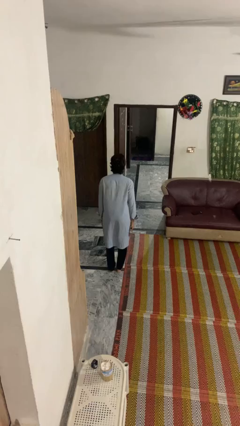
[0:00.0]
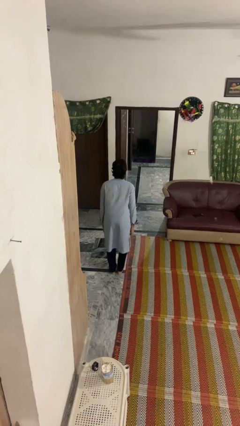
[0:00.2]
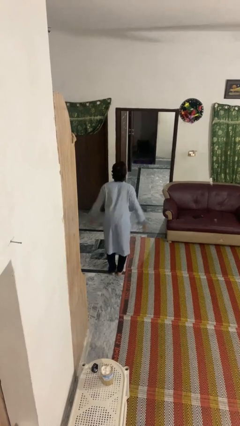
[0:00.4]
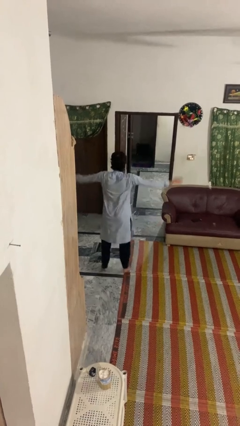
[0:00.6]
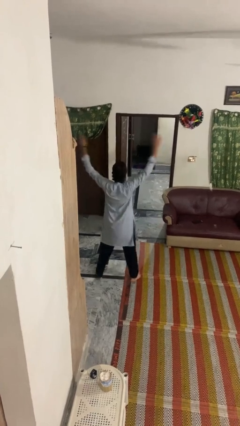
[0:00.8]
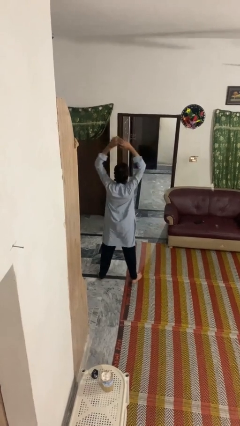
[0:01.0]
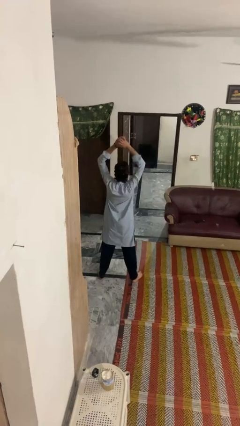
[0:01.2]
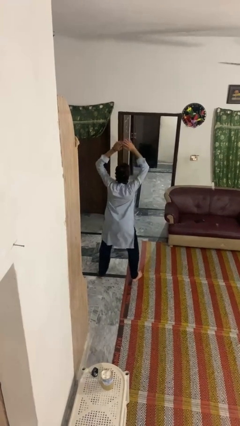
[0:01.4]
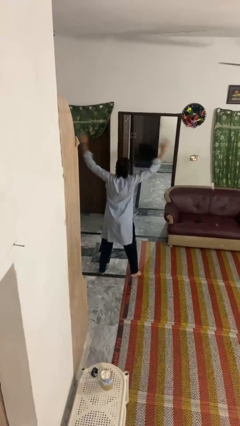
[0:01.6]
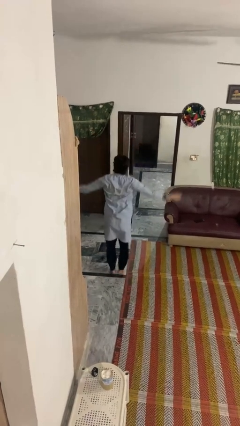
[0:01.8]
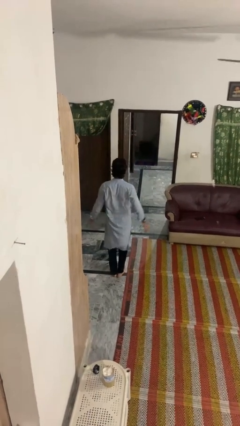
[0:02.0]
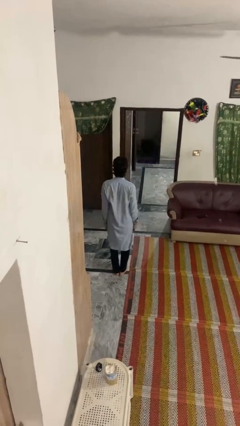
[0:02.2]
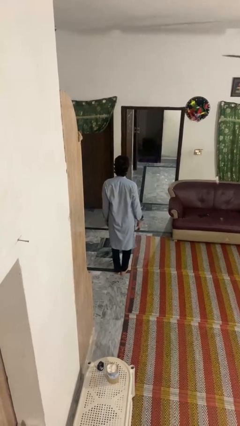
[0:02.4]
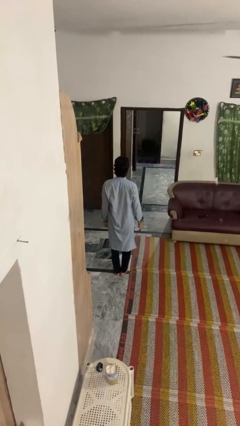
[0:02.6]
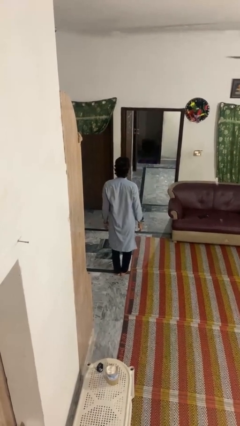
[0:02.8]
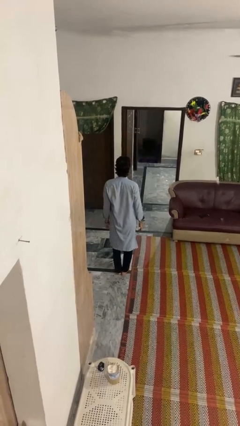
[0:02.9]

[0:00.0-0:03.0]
person exercises with jumping jacks

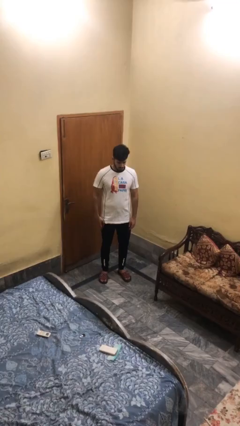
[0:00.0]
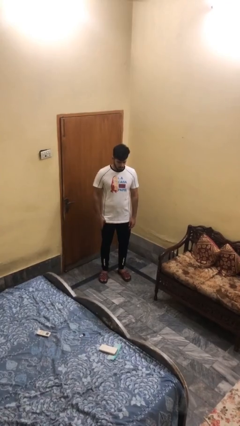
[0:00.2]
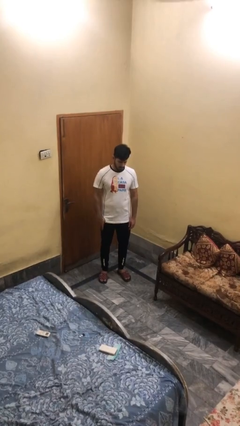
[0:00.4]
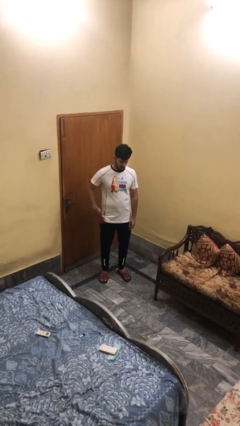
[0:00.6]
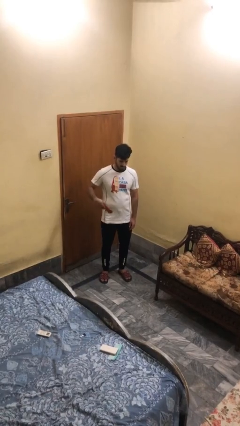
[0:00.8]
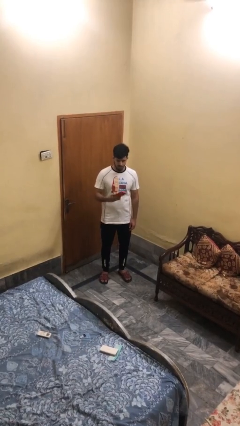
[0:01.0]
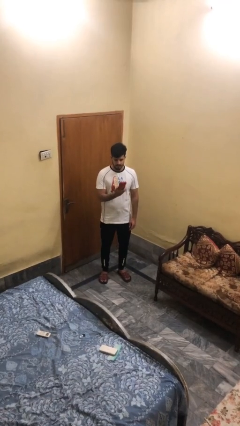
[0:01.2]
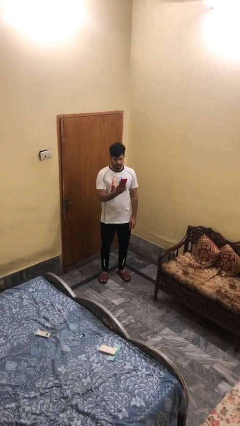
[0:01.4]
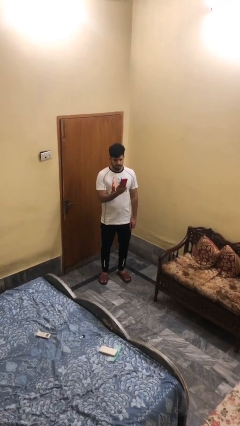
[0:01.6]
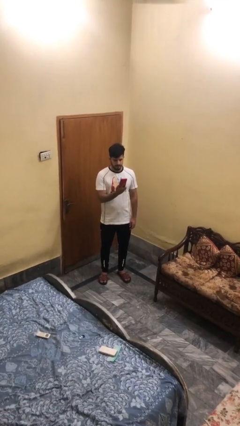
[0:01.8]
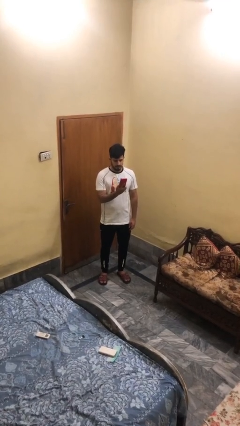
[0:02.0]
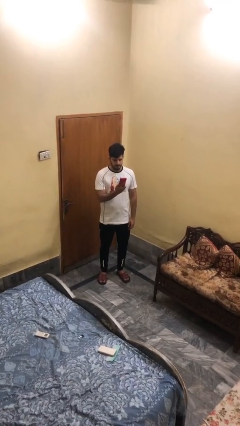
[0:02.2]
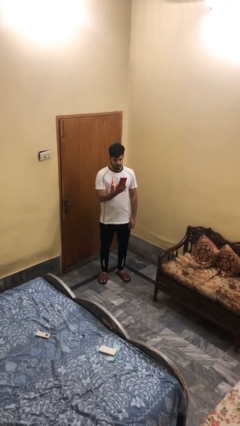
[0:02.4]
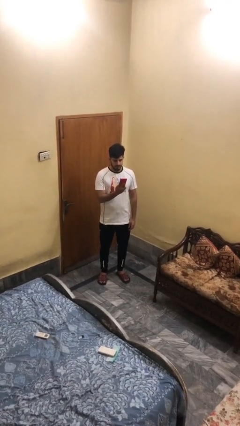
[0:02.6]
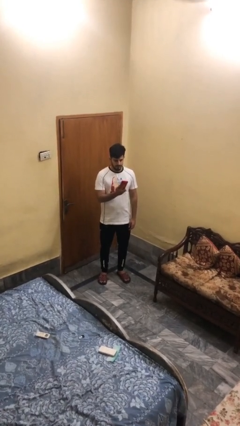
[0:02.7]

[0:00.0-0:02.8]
person takes phone from pocket

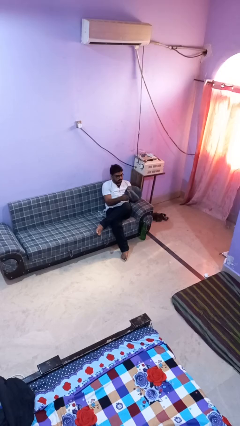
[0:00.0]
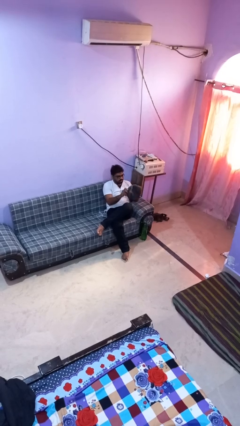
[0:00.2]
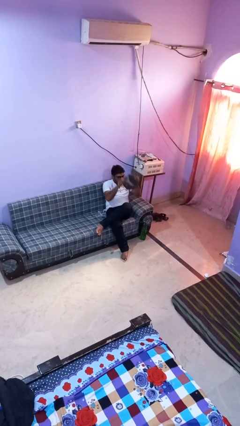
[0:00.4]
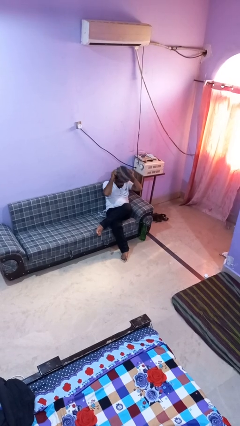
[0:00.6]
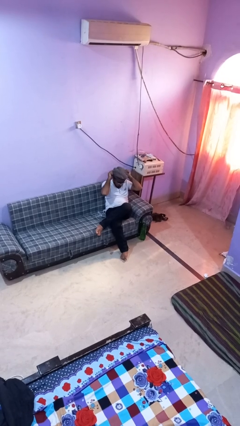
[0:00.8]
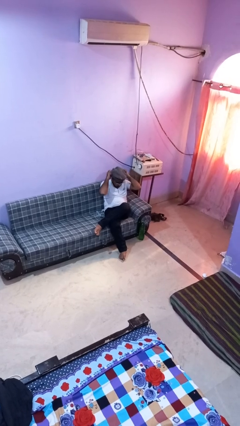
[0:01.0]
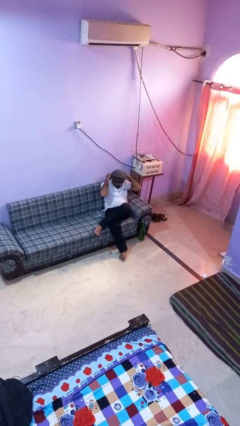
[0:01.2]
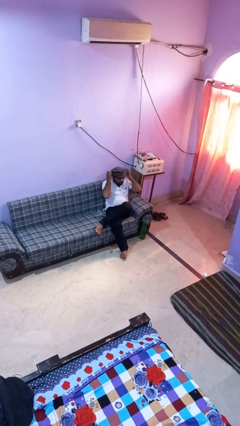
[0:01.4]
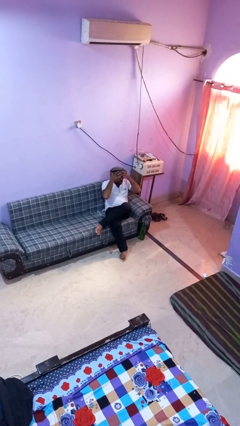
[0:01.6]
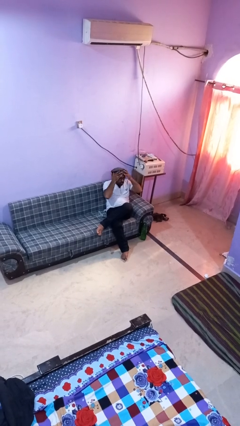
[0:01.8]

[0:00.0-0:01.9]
person puts on hat

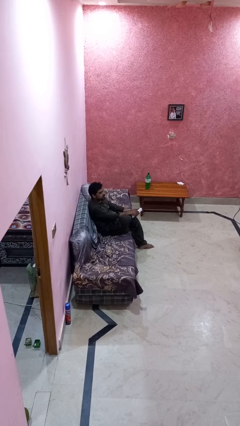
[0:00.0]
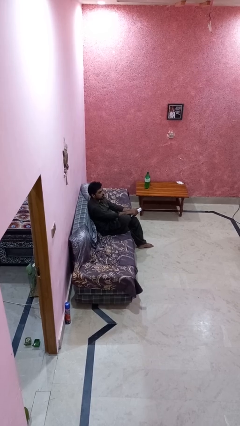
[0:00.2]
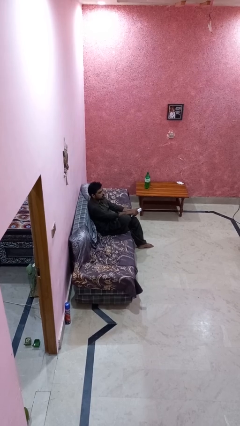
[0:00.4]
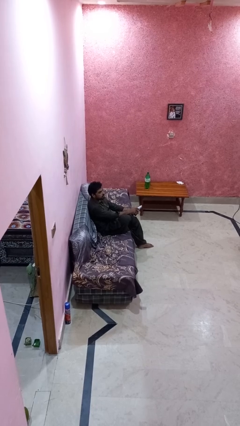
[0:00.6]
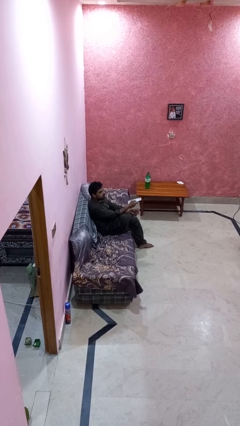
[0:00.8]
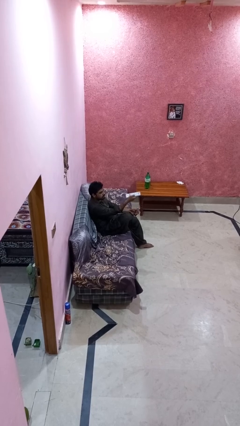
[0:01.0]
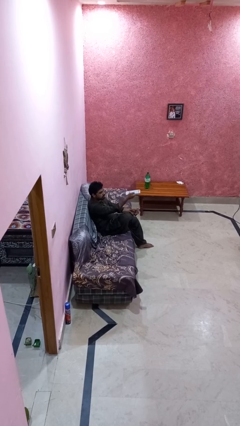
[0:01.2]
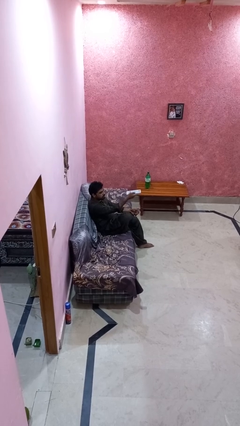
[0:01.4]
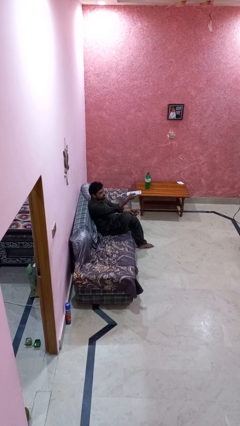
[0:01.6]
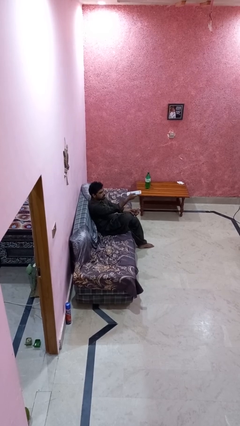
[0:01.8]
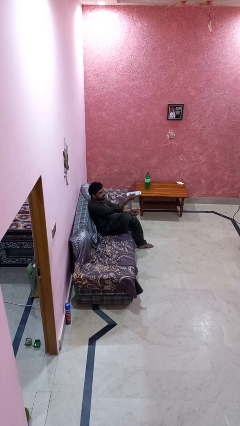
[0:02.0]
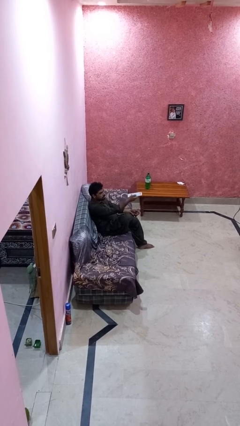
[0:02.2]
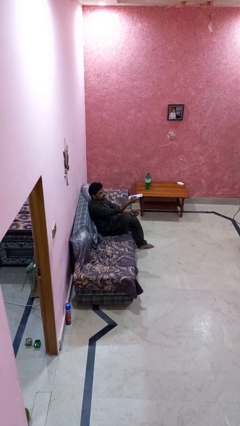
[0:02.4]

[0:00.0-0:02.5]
person uses television remote

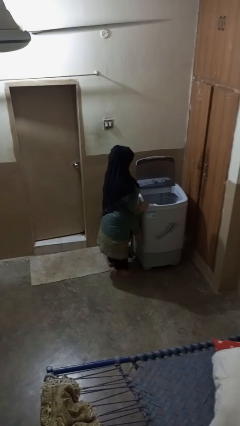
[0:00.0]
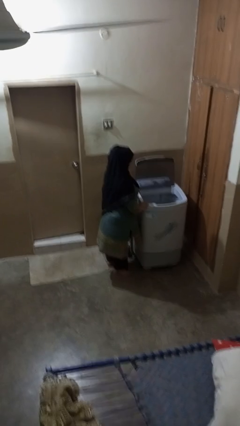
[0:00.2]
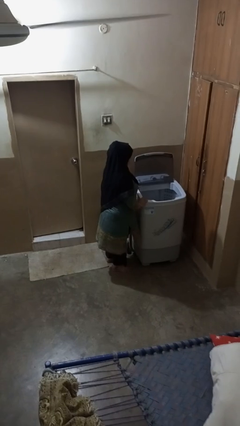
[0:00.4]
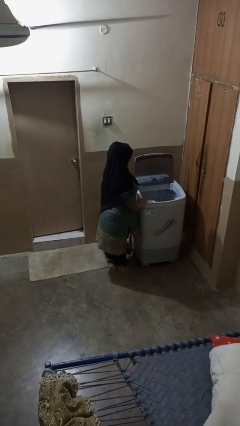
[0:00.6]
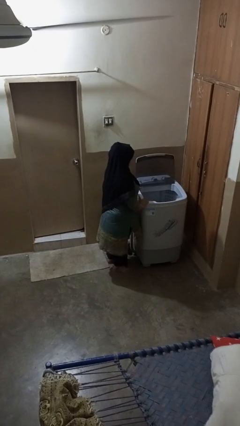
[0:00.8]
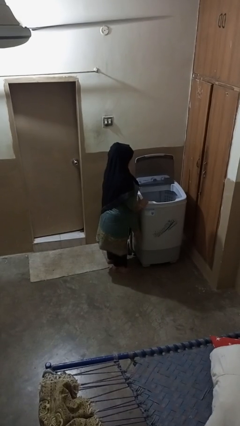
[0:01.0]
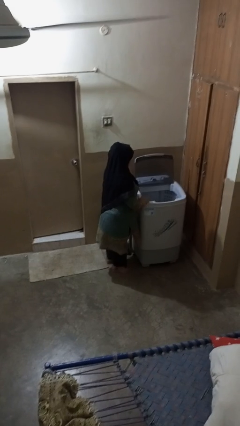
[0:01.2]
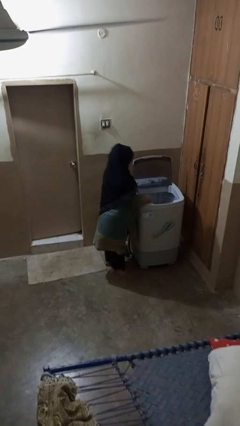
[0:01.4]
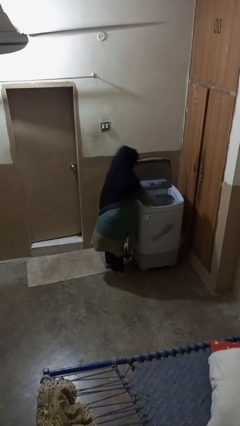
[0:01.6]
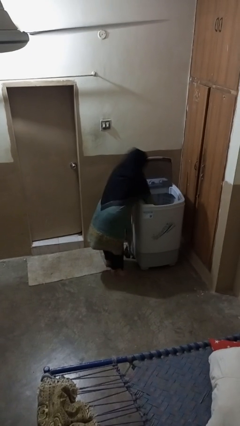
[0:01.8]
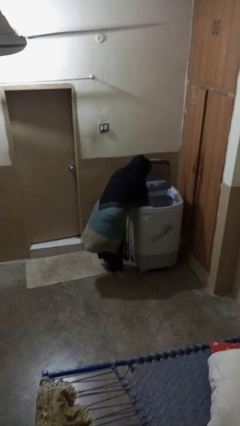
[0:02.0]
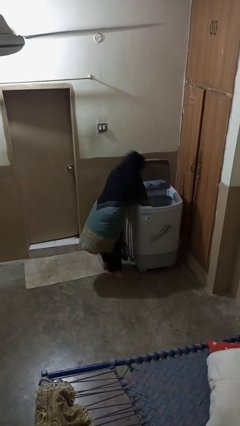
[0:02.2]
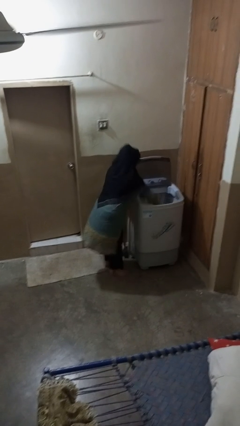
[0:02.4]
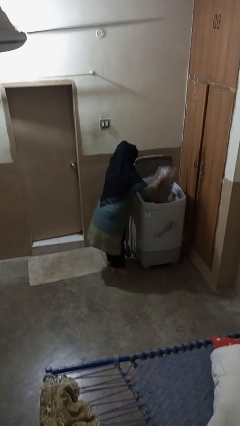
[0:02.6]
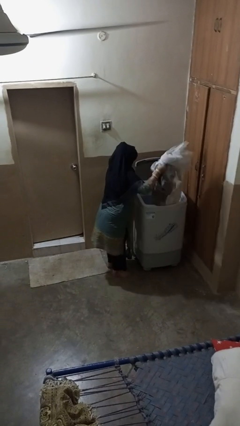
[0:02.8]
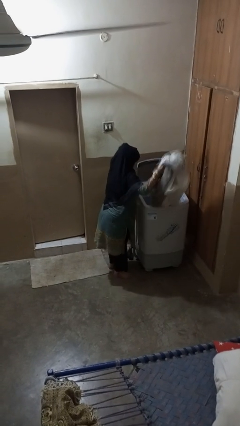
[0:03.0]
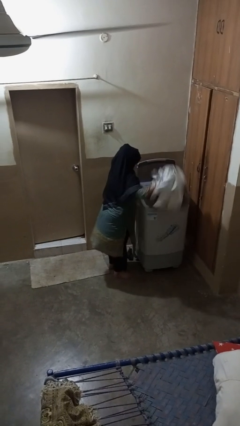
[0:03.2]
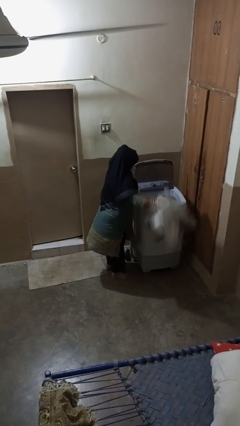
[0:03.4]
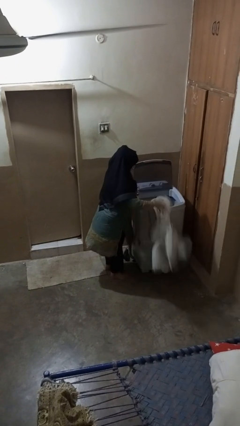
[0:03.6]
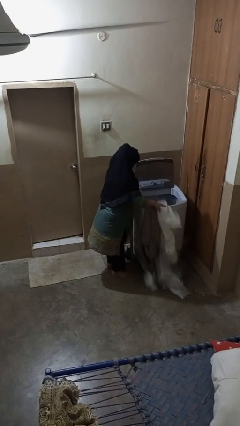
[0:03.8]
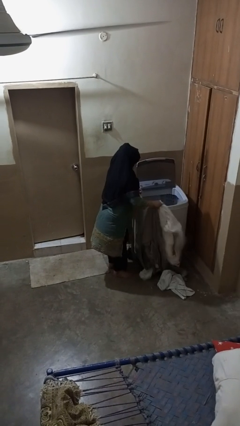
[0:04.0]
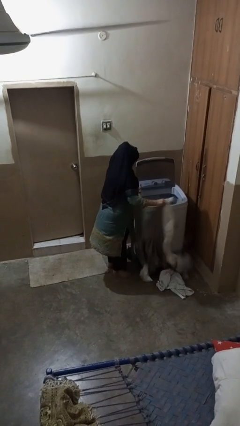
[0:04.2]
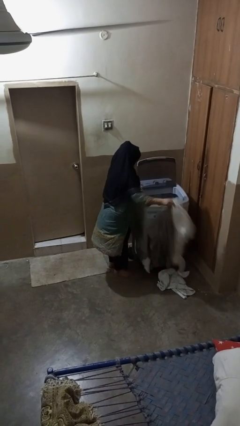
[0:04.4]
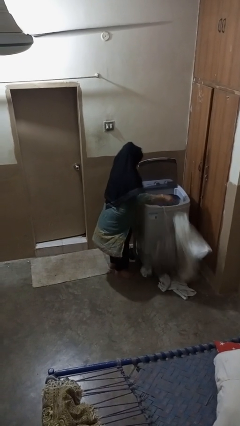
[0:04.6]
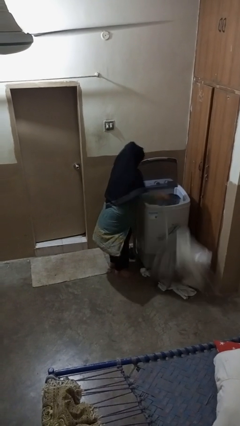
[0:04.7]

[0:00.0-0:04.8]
person unloads clotheswasher

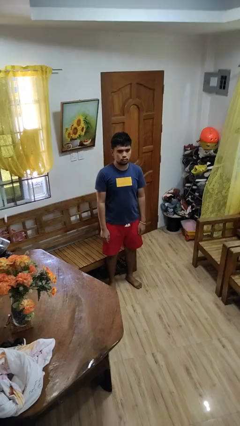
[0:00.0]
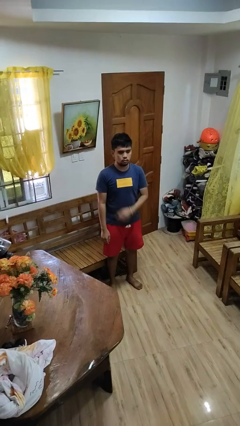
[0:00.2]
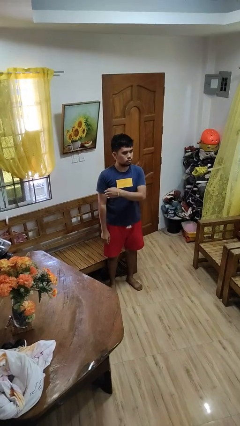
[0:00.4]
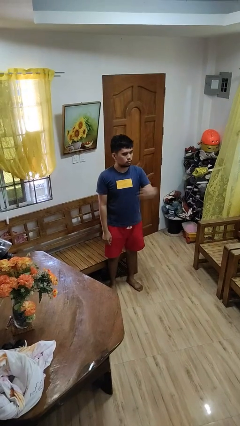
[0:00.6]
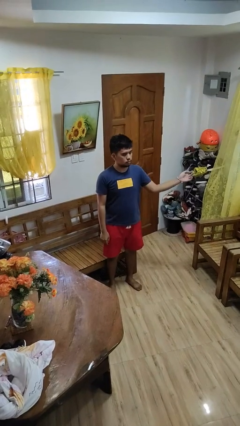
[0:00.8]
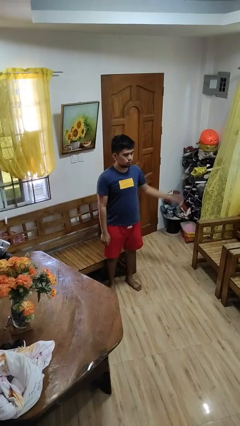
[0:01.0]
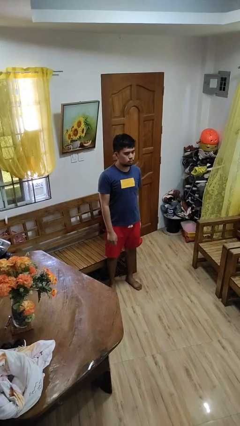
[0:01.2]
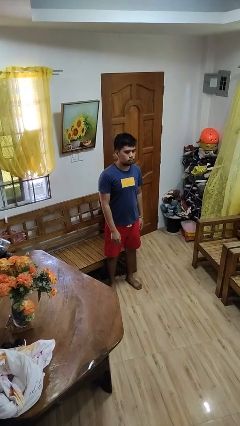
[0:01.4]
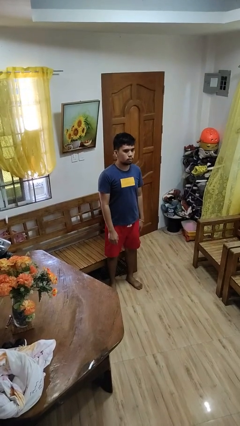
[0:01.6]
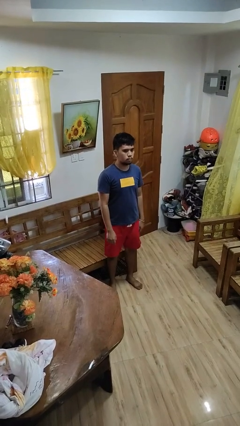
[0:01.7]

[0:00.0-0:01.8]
person gestures swipe left

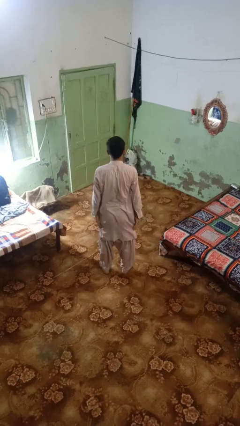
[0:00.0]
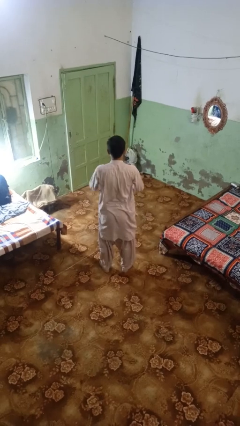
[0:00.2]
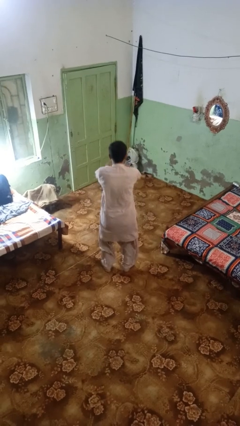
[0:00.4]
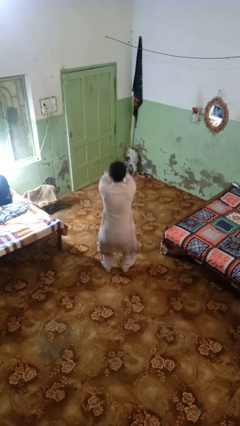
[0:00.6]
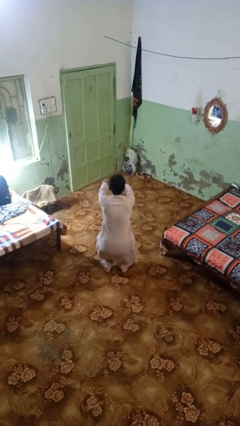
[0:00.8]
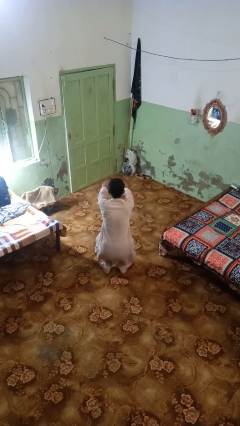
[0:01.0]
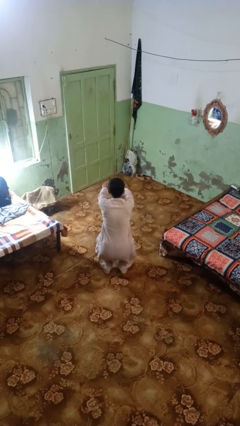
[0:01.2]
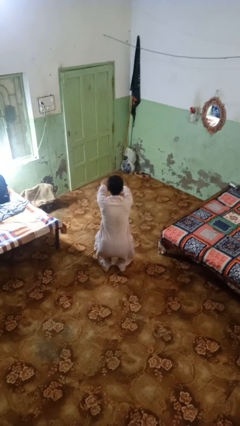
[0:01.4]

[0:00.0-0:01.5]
person squats
